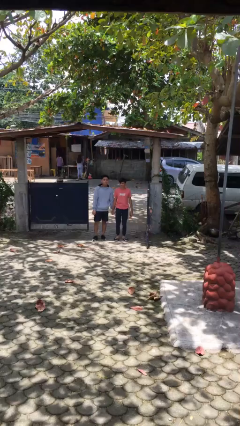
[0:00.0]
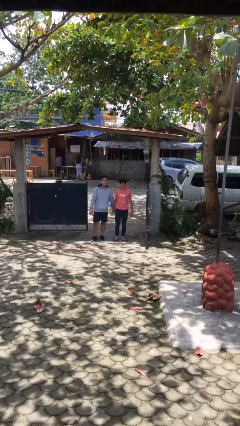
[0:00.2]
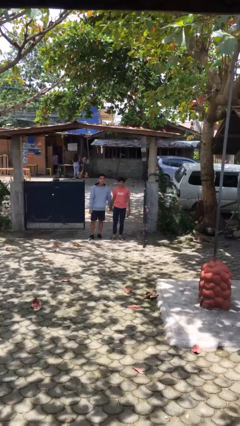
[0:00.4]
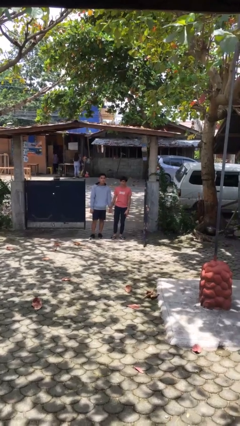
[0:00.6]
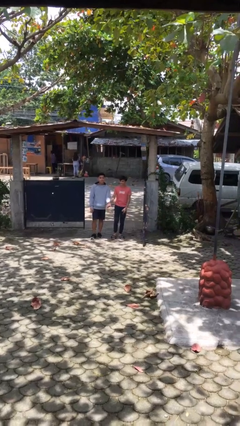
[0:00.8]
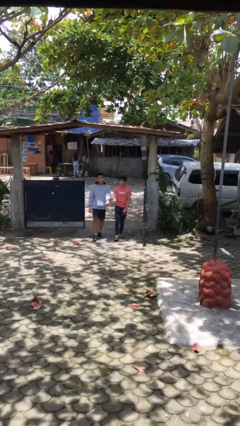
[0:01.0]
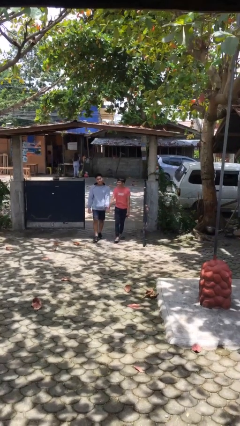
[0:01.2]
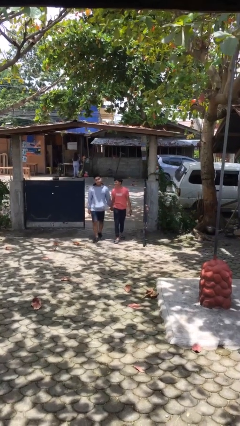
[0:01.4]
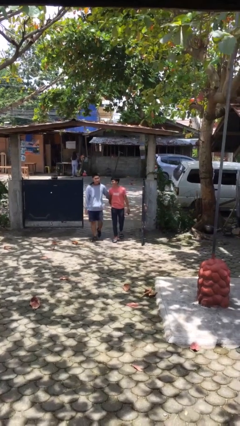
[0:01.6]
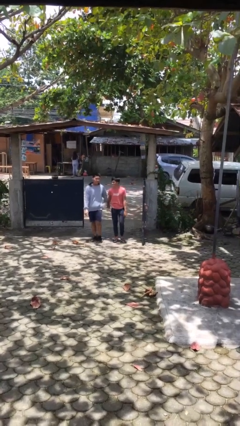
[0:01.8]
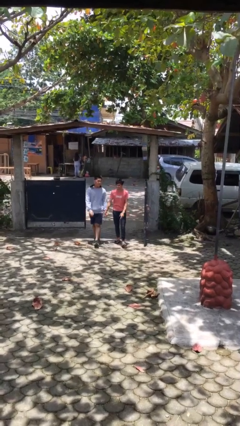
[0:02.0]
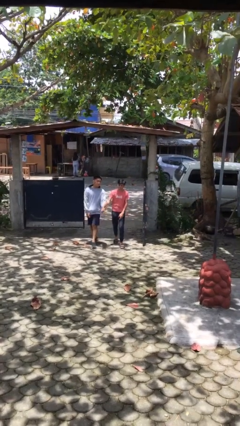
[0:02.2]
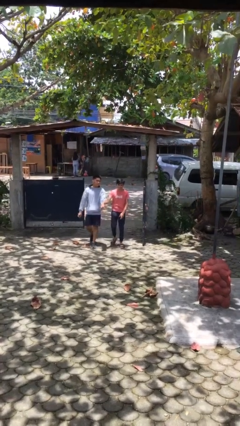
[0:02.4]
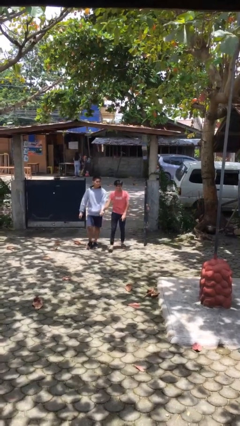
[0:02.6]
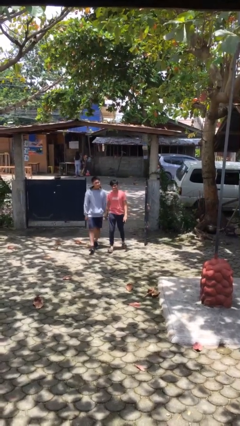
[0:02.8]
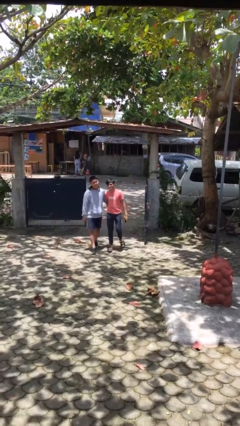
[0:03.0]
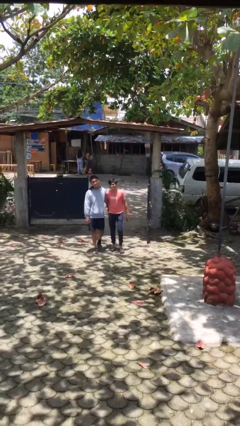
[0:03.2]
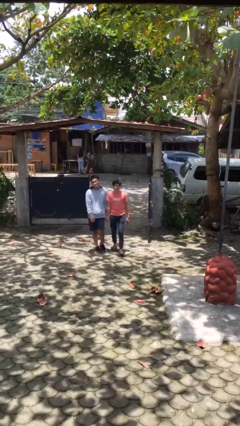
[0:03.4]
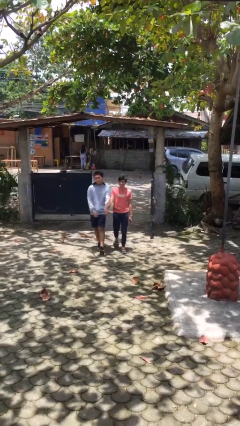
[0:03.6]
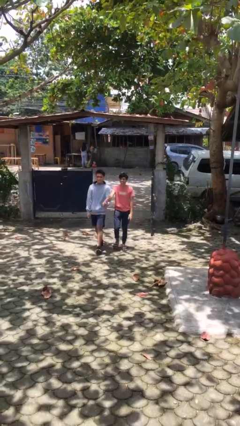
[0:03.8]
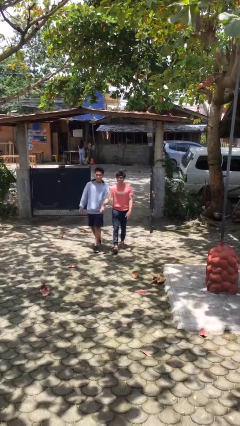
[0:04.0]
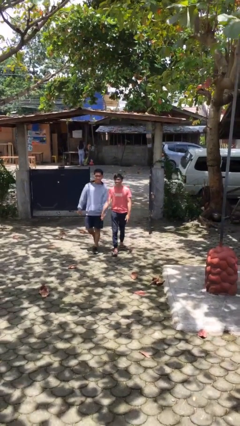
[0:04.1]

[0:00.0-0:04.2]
person holds hand

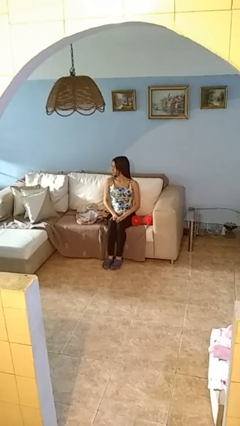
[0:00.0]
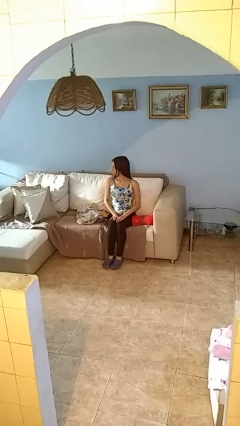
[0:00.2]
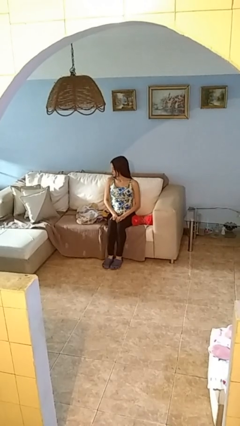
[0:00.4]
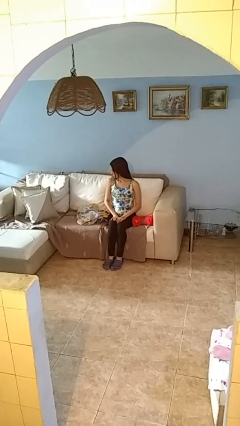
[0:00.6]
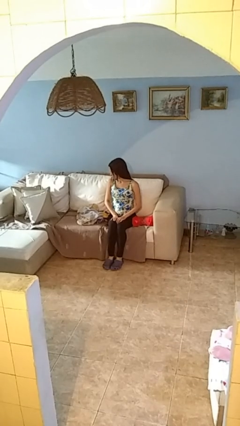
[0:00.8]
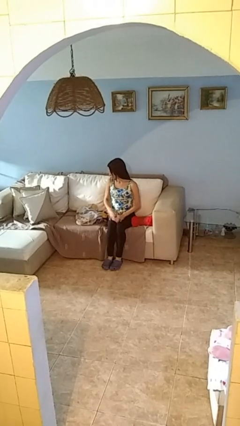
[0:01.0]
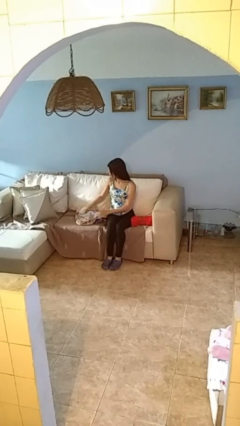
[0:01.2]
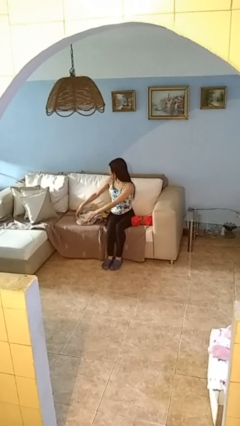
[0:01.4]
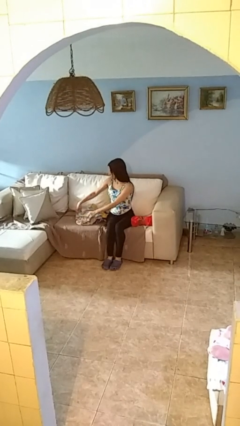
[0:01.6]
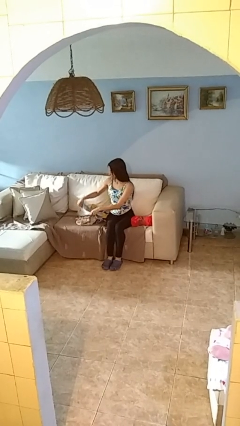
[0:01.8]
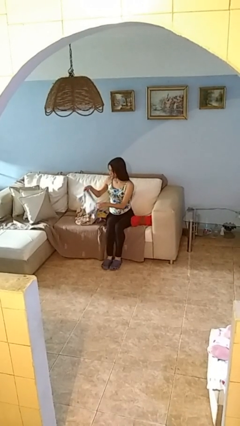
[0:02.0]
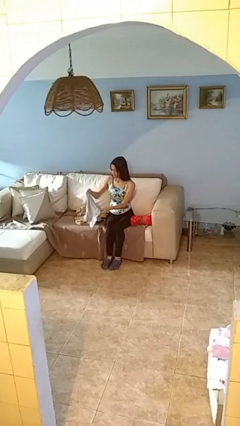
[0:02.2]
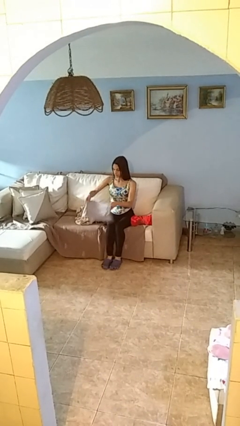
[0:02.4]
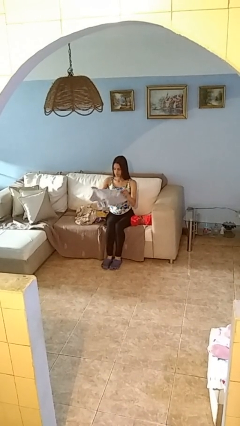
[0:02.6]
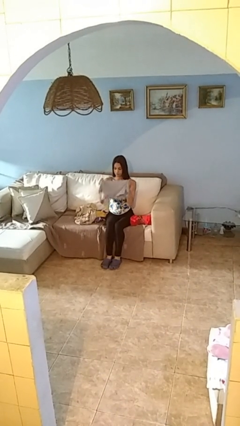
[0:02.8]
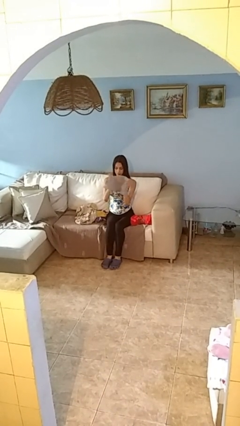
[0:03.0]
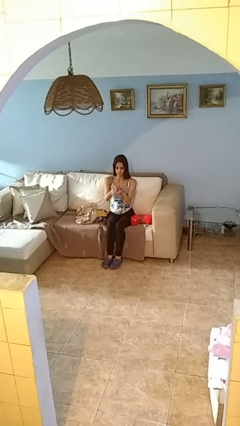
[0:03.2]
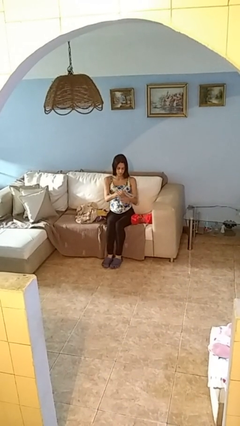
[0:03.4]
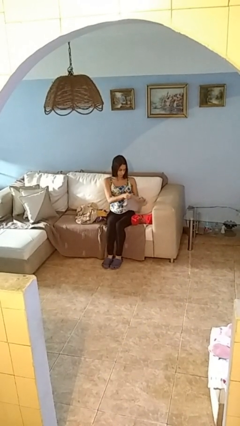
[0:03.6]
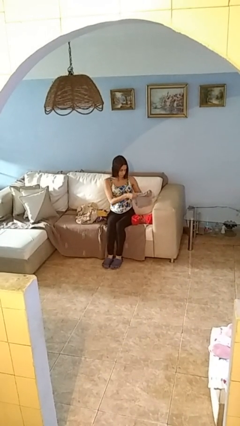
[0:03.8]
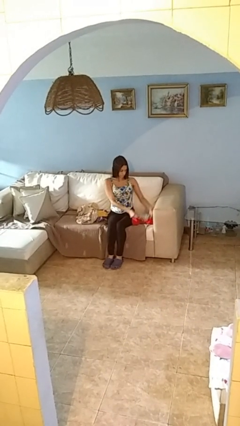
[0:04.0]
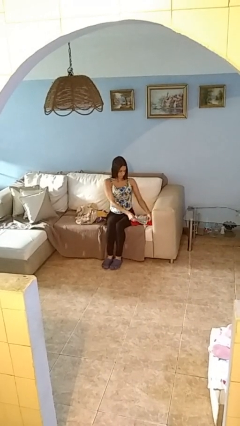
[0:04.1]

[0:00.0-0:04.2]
person folds shirt

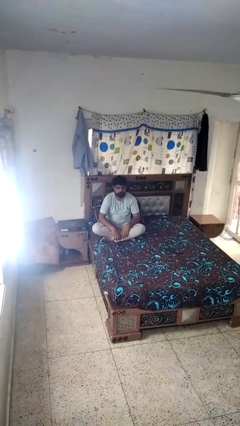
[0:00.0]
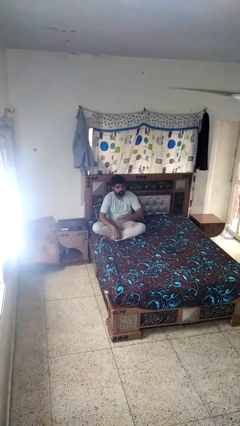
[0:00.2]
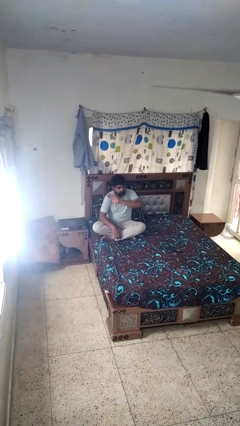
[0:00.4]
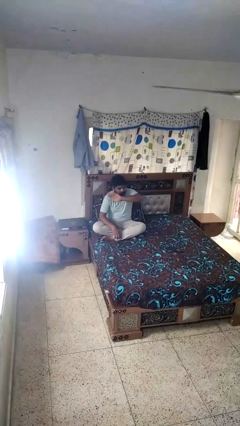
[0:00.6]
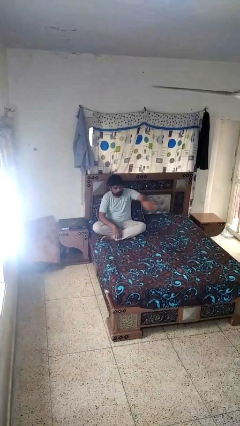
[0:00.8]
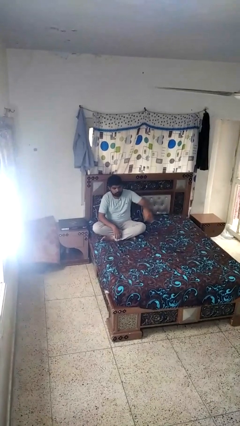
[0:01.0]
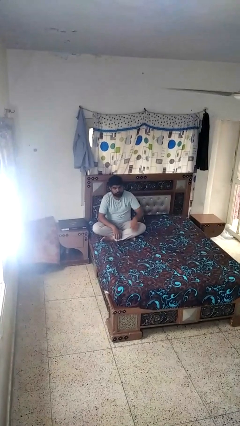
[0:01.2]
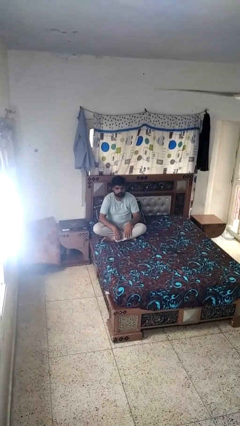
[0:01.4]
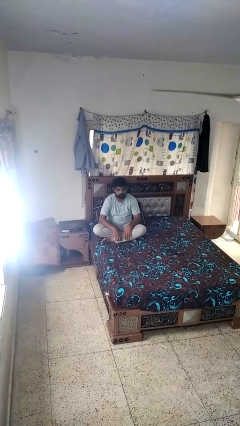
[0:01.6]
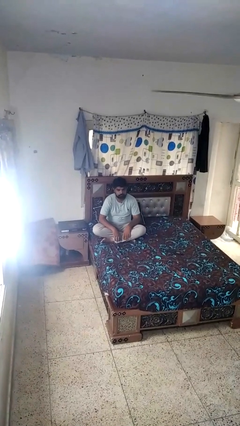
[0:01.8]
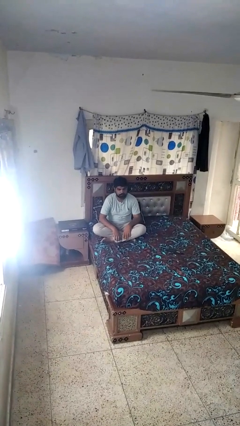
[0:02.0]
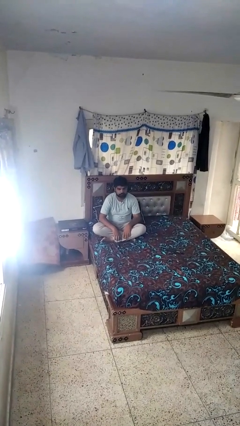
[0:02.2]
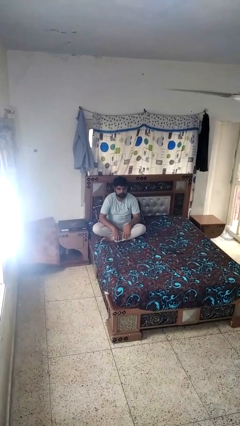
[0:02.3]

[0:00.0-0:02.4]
person gestures swipe left

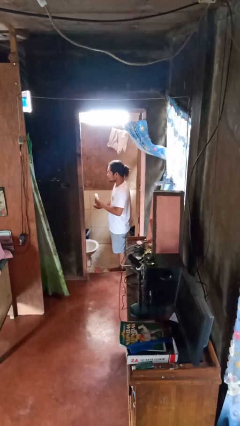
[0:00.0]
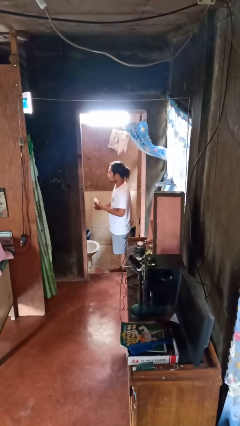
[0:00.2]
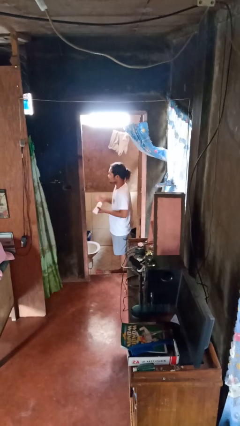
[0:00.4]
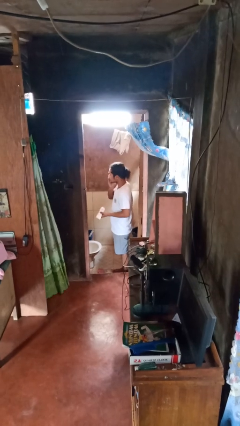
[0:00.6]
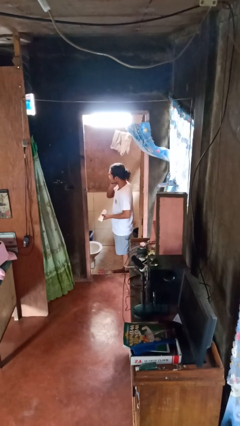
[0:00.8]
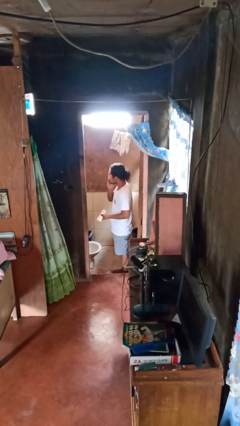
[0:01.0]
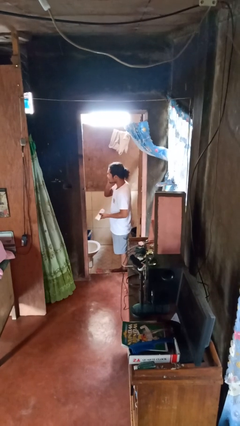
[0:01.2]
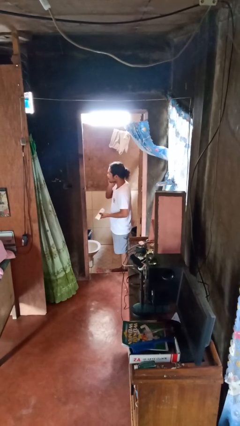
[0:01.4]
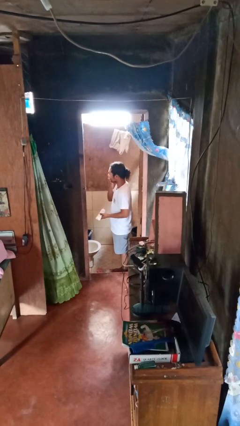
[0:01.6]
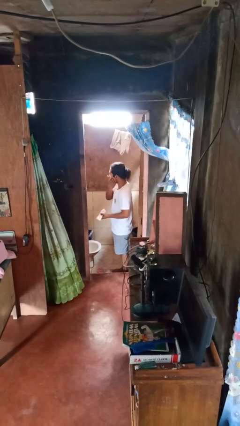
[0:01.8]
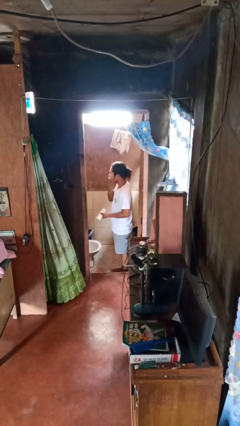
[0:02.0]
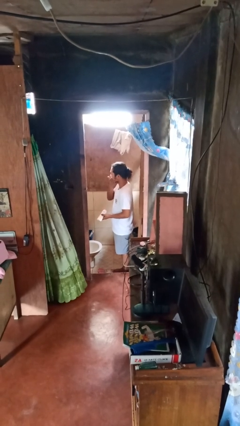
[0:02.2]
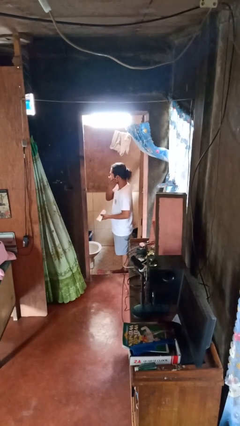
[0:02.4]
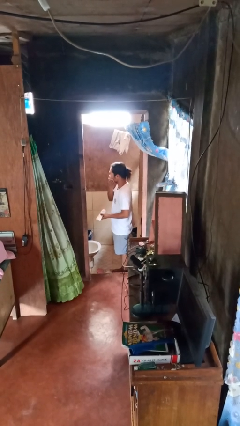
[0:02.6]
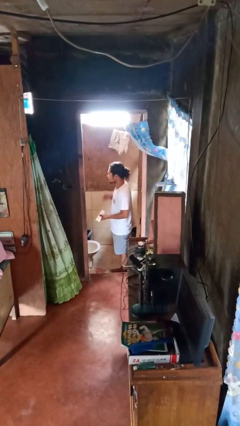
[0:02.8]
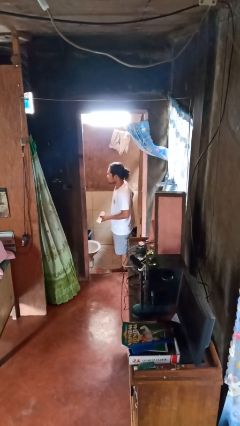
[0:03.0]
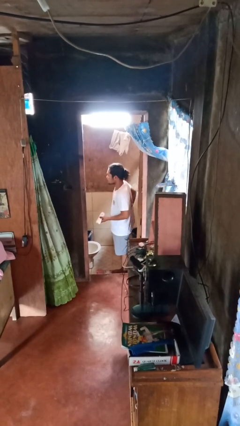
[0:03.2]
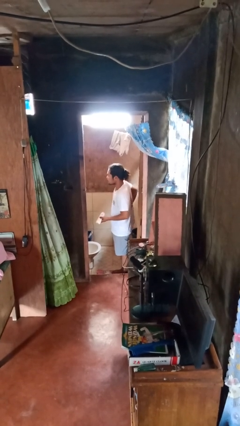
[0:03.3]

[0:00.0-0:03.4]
person applies shaving cream

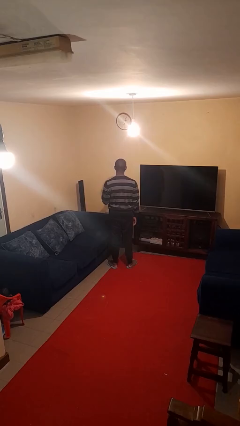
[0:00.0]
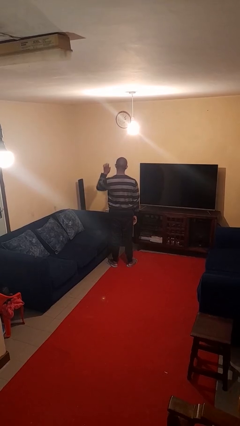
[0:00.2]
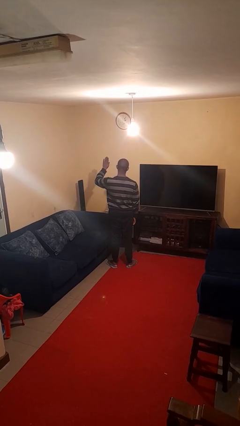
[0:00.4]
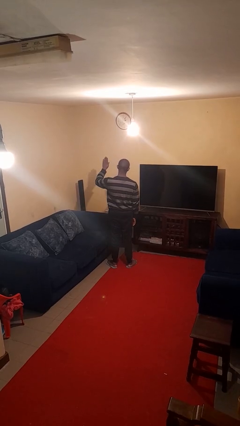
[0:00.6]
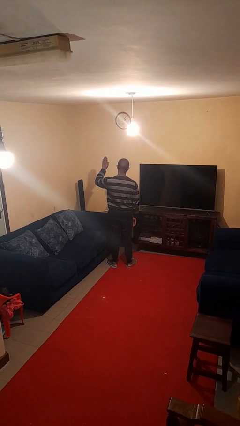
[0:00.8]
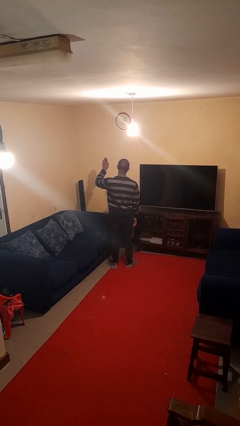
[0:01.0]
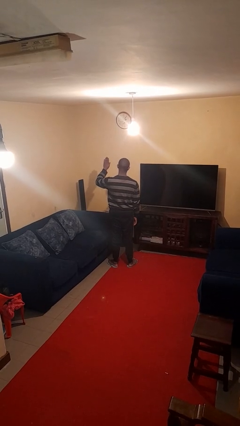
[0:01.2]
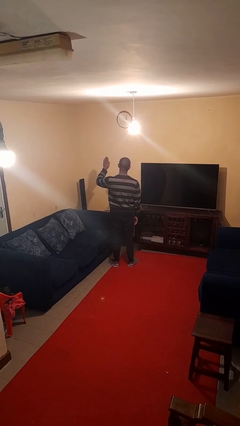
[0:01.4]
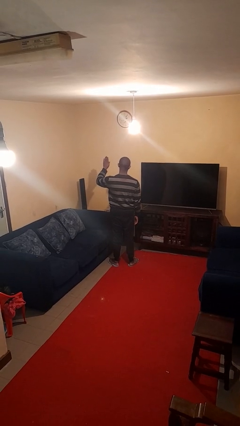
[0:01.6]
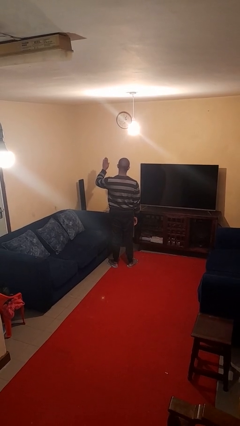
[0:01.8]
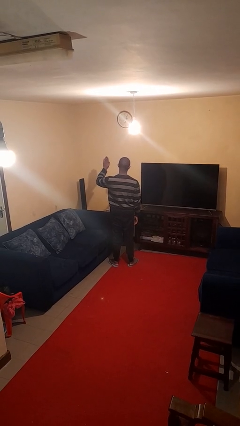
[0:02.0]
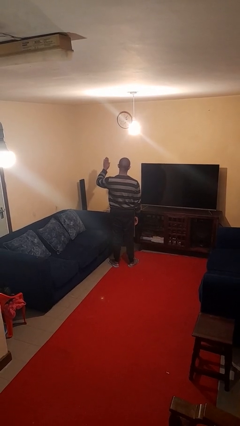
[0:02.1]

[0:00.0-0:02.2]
person gestures stop

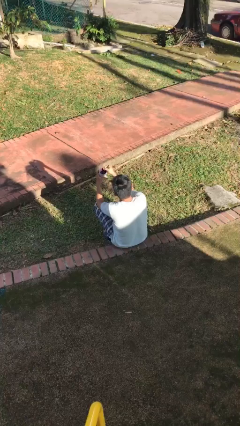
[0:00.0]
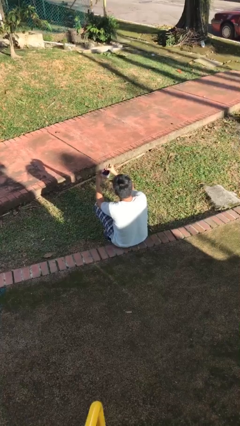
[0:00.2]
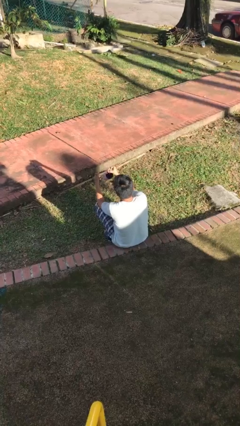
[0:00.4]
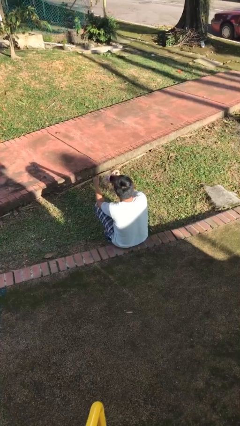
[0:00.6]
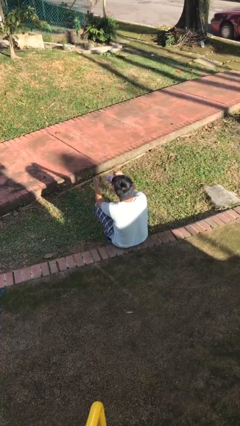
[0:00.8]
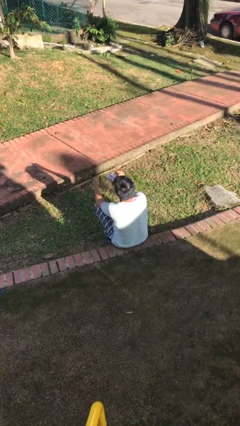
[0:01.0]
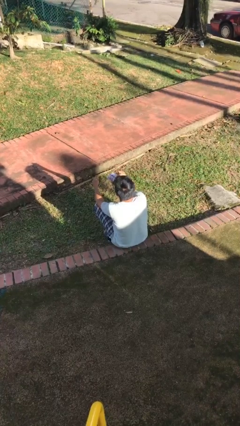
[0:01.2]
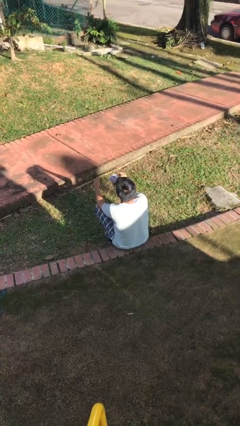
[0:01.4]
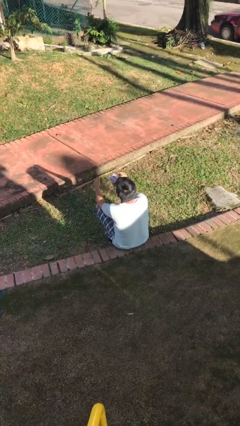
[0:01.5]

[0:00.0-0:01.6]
person drinks from mug
